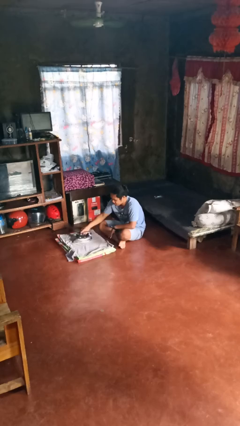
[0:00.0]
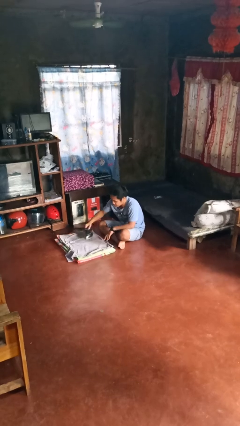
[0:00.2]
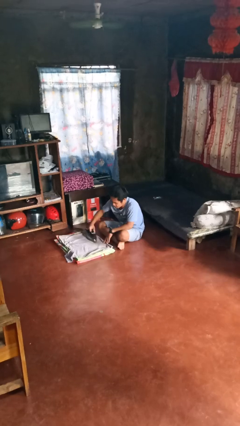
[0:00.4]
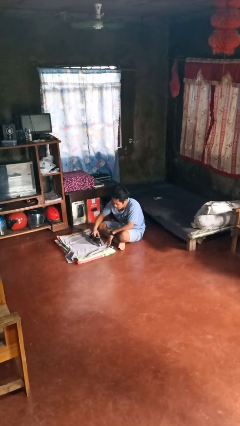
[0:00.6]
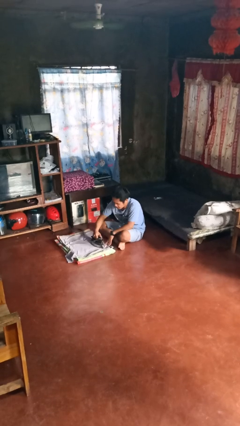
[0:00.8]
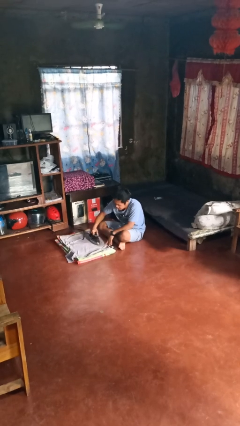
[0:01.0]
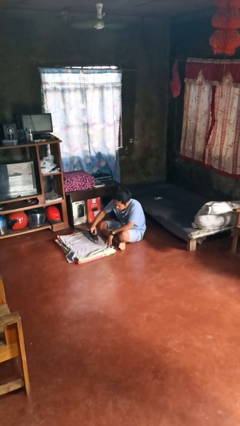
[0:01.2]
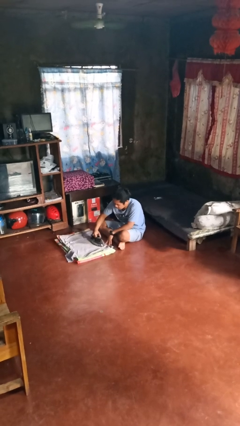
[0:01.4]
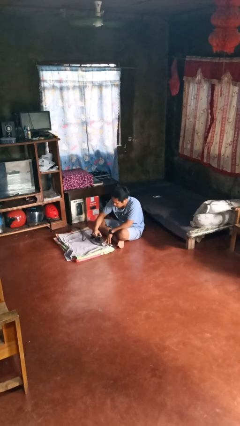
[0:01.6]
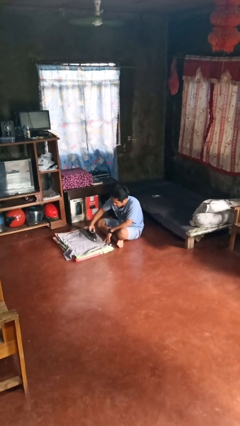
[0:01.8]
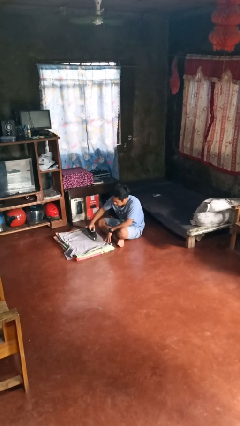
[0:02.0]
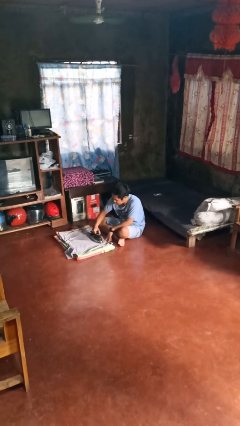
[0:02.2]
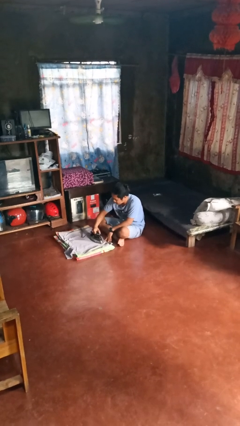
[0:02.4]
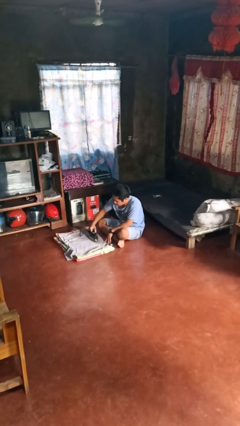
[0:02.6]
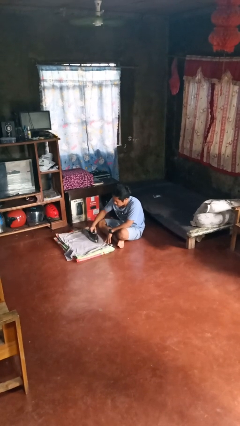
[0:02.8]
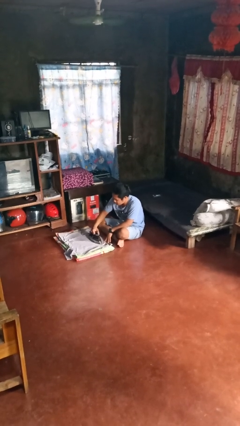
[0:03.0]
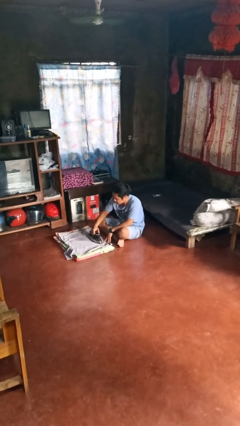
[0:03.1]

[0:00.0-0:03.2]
person irons clothes

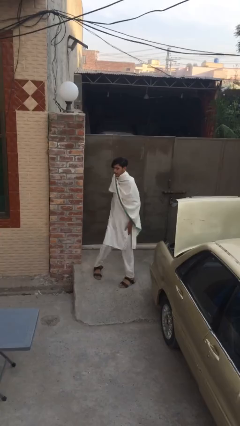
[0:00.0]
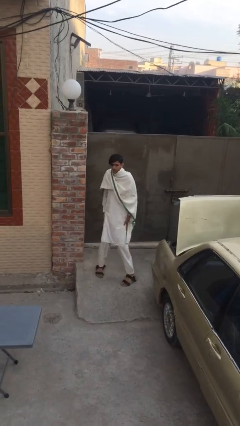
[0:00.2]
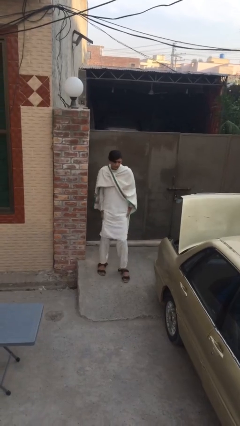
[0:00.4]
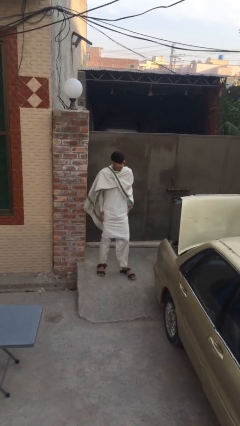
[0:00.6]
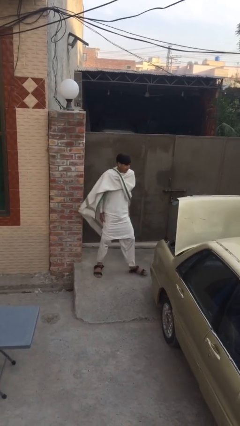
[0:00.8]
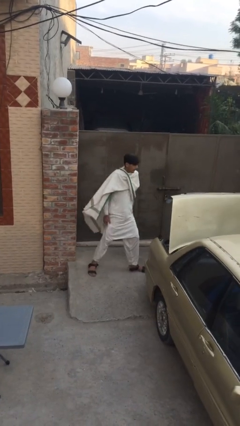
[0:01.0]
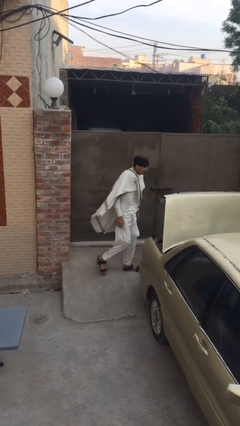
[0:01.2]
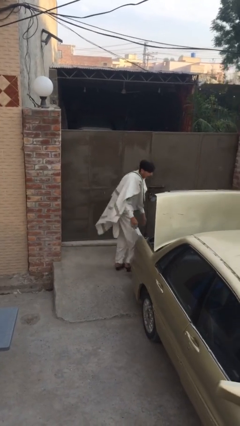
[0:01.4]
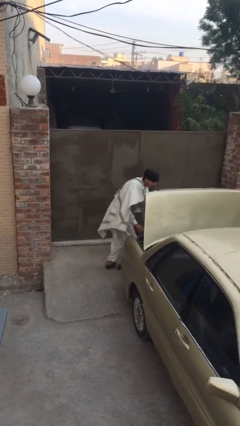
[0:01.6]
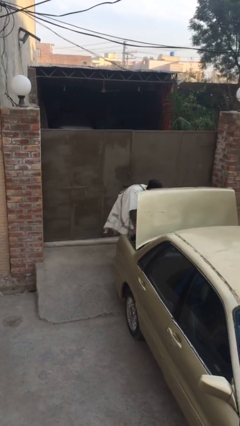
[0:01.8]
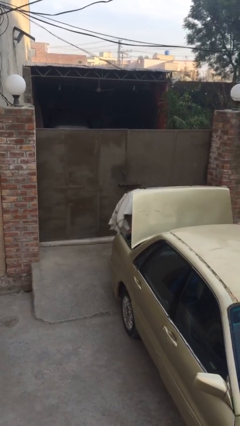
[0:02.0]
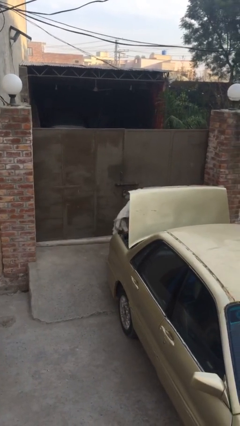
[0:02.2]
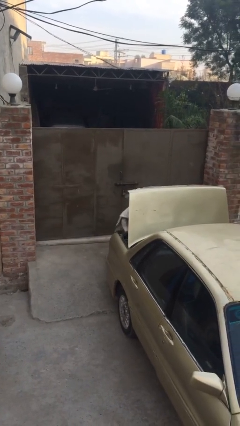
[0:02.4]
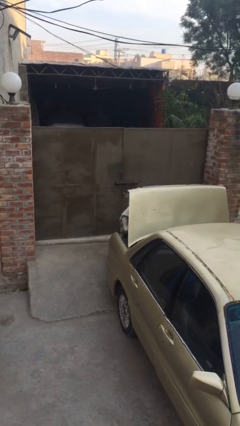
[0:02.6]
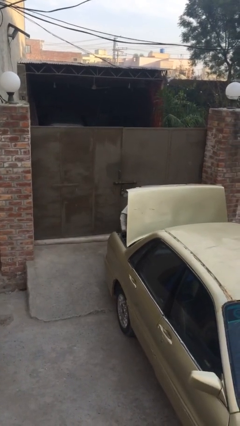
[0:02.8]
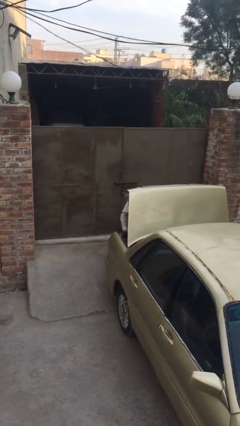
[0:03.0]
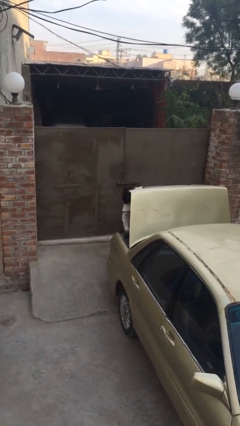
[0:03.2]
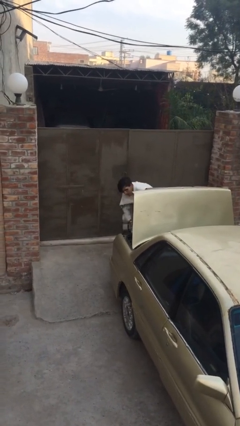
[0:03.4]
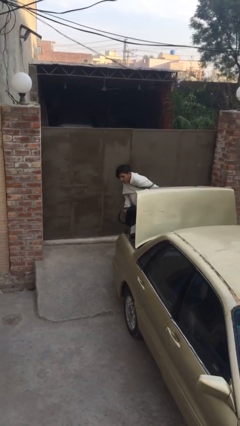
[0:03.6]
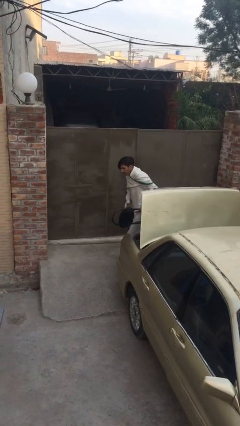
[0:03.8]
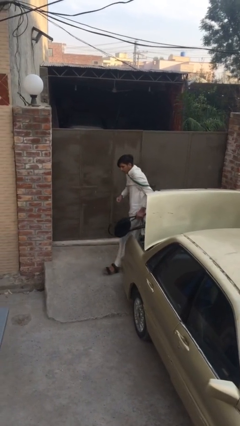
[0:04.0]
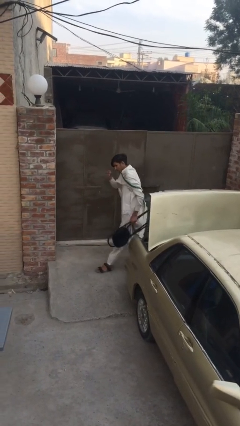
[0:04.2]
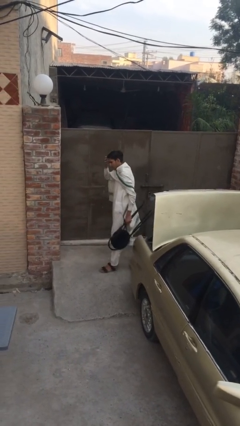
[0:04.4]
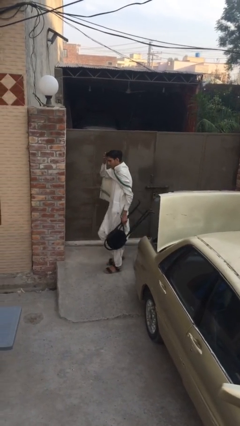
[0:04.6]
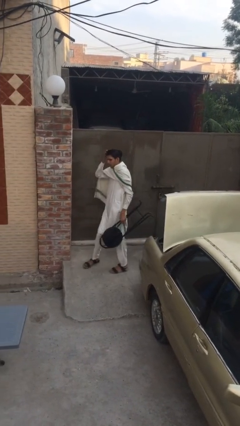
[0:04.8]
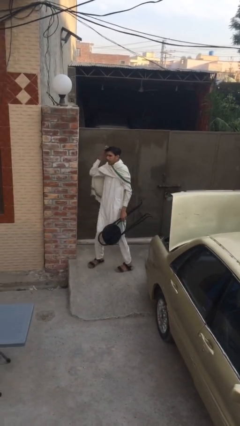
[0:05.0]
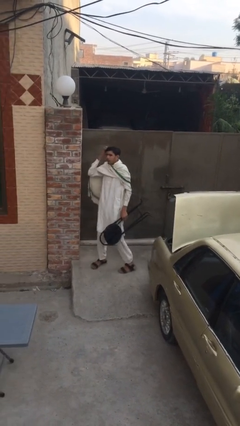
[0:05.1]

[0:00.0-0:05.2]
person unloads car

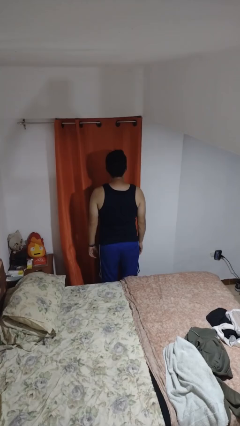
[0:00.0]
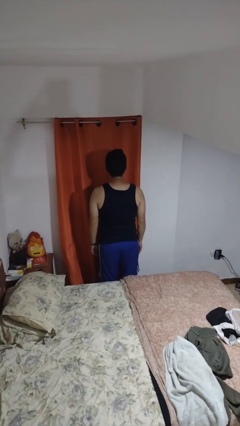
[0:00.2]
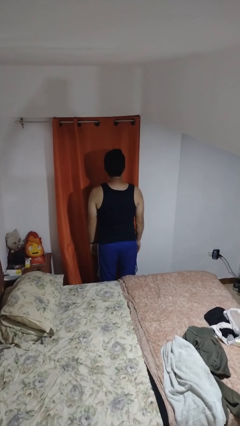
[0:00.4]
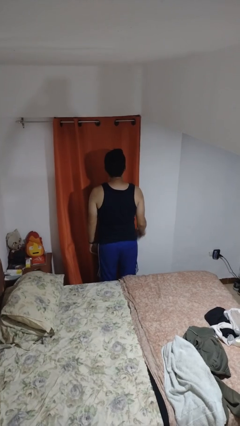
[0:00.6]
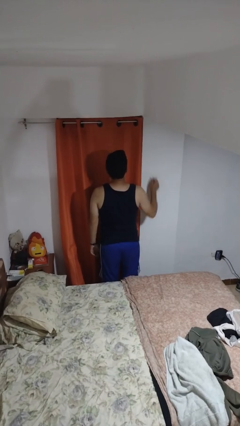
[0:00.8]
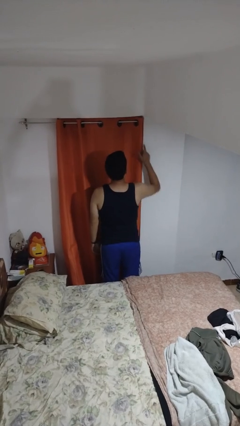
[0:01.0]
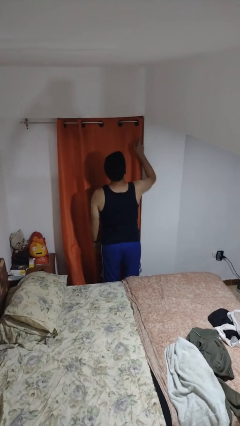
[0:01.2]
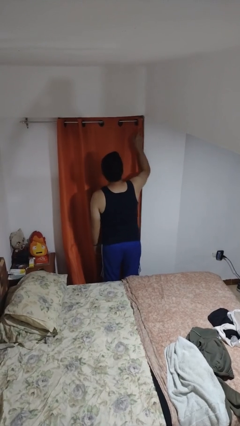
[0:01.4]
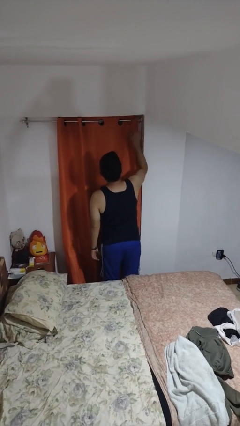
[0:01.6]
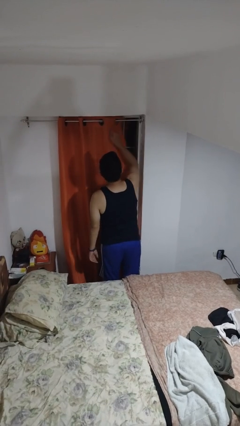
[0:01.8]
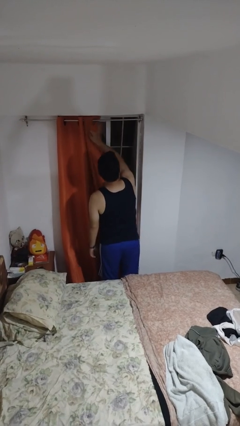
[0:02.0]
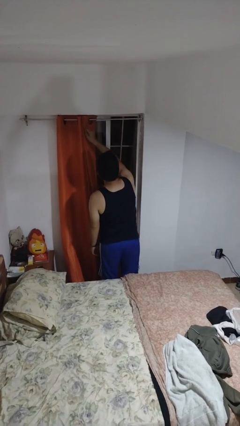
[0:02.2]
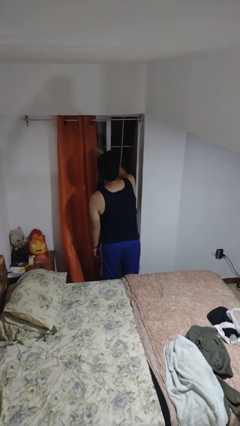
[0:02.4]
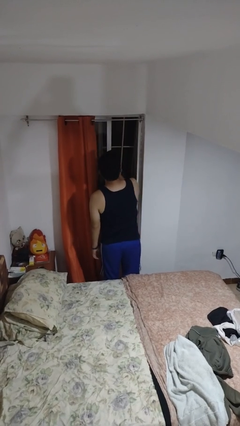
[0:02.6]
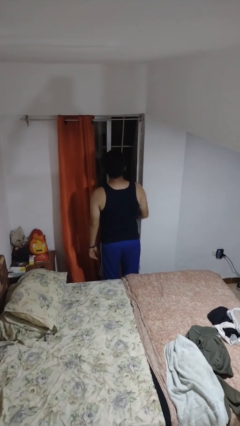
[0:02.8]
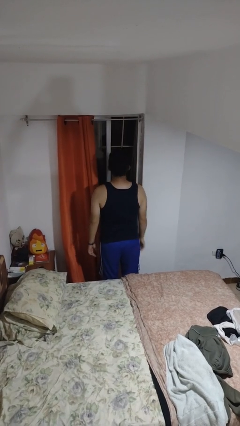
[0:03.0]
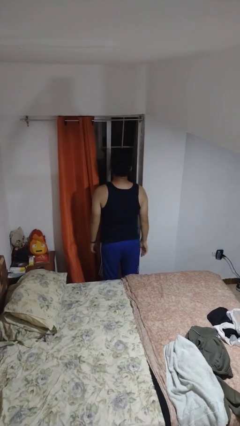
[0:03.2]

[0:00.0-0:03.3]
person opens curtains

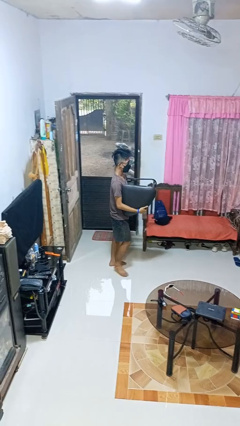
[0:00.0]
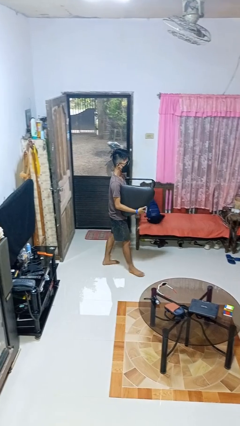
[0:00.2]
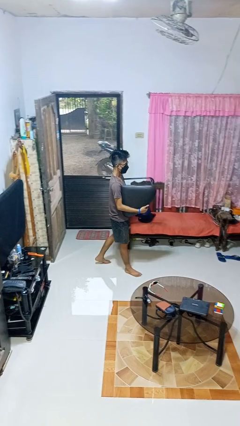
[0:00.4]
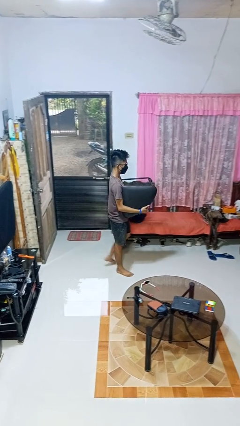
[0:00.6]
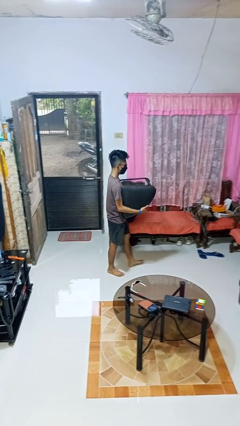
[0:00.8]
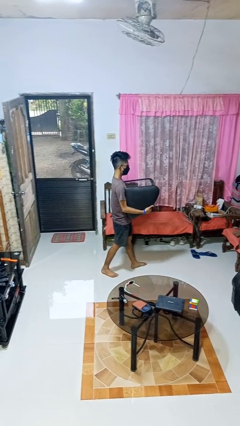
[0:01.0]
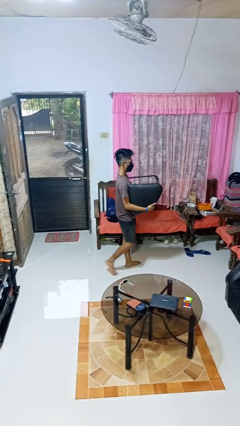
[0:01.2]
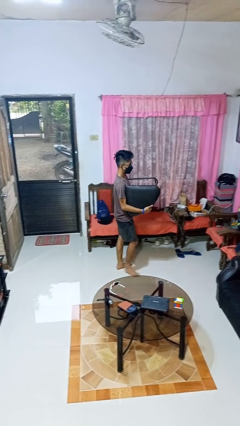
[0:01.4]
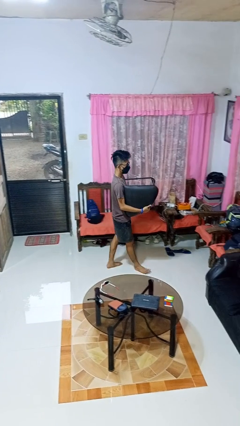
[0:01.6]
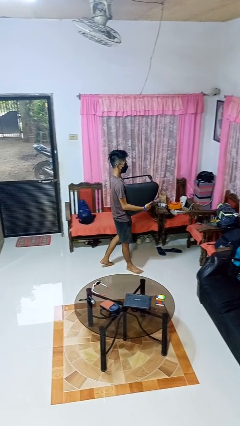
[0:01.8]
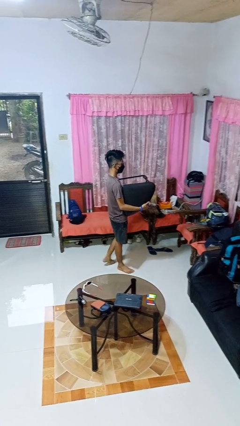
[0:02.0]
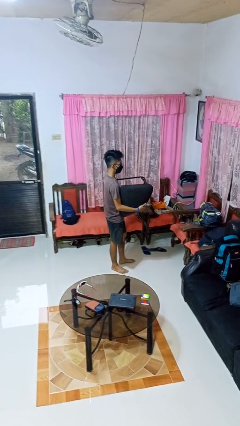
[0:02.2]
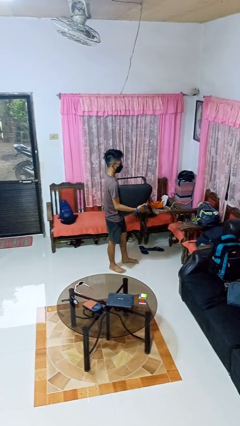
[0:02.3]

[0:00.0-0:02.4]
person carries furniture

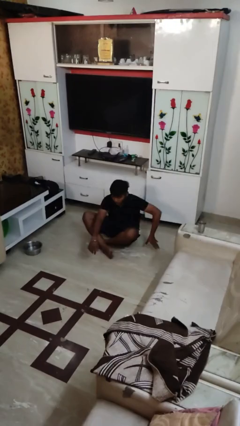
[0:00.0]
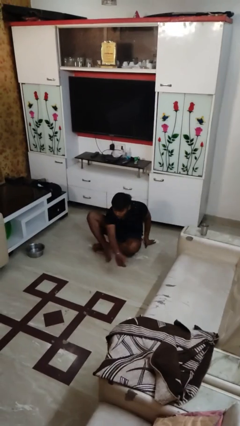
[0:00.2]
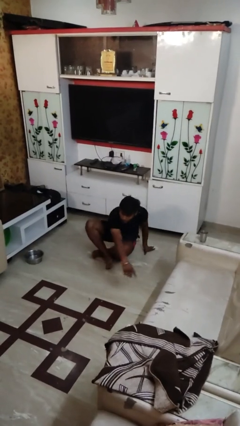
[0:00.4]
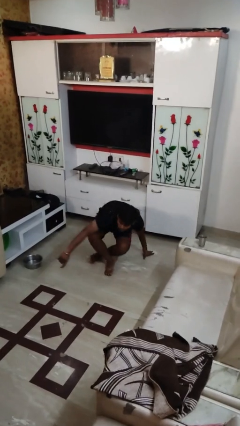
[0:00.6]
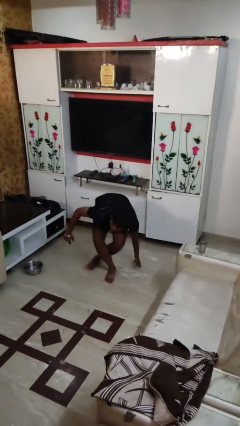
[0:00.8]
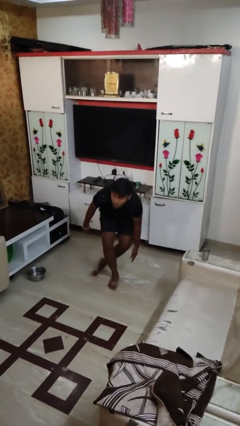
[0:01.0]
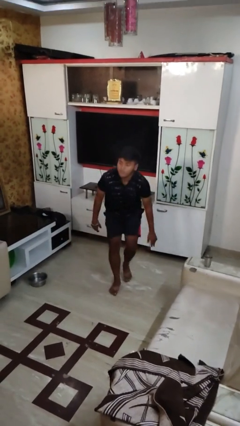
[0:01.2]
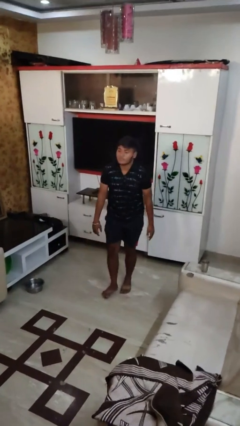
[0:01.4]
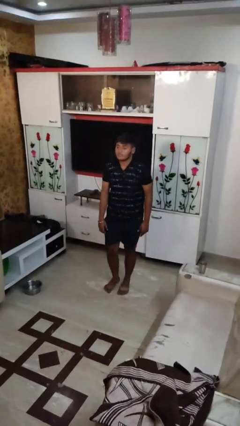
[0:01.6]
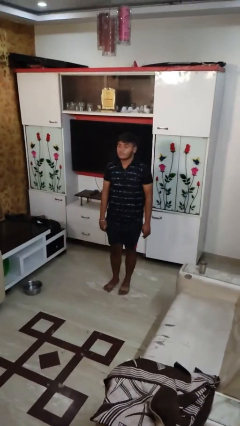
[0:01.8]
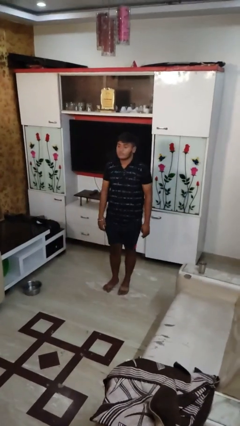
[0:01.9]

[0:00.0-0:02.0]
person stands up from floor

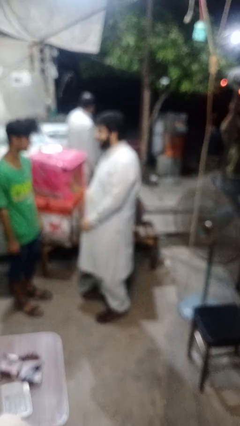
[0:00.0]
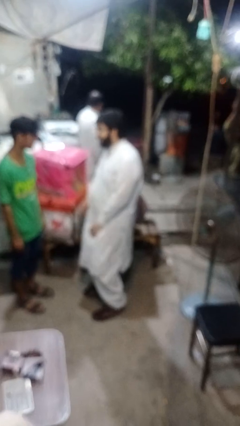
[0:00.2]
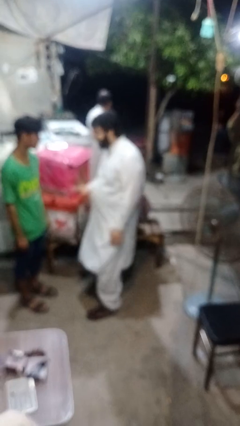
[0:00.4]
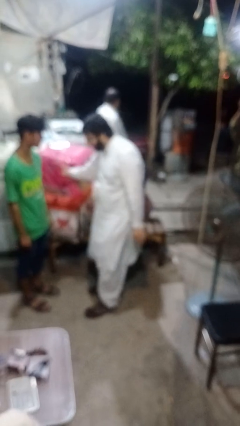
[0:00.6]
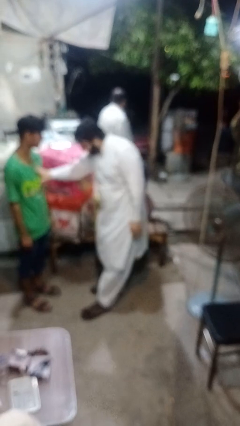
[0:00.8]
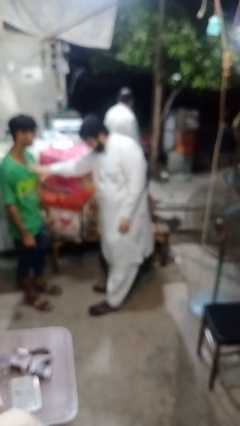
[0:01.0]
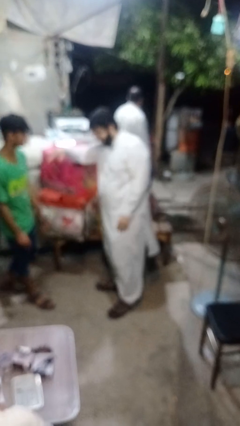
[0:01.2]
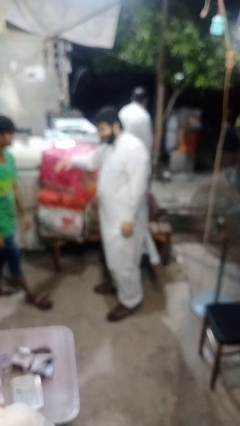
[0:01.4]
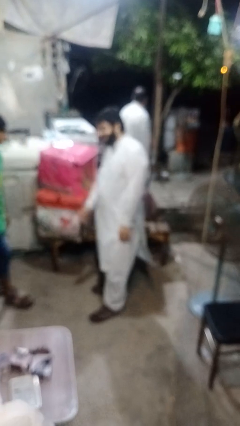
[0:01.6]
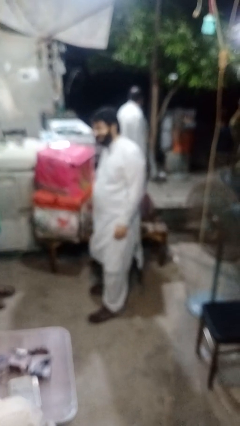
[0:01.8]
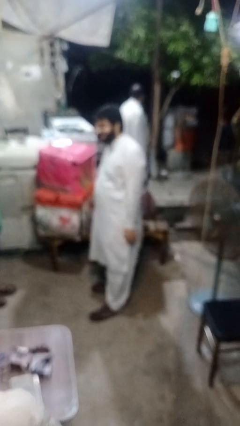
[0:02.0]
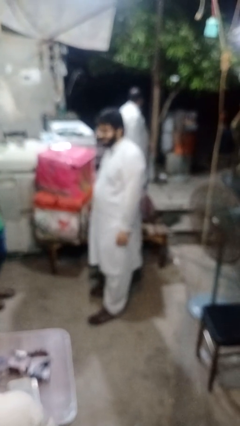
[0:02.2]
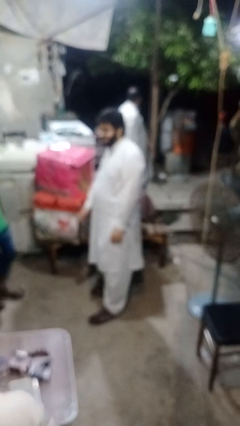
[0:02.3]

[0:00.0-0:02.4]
person shoves person
